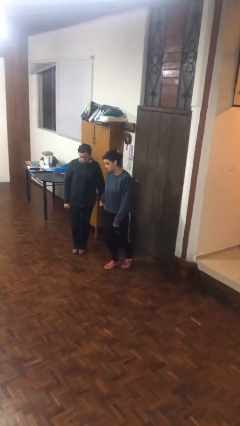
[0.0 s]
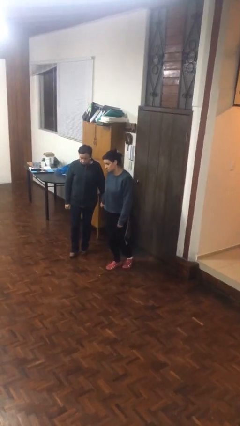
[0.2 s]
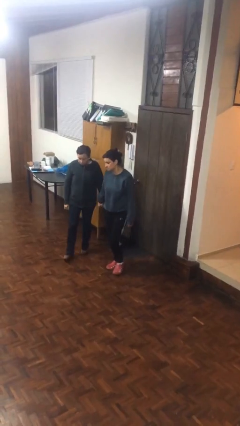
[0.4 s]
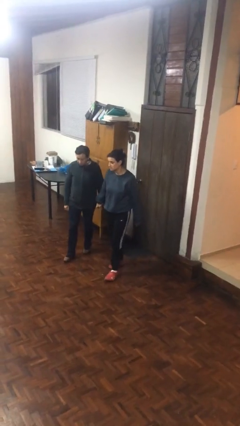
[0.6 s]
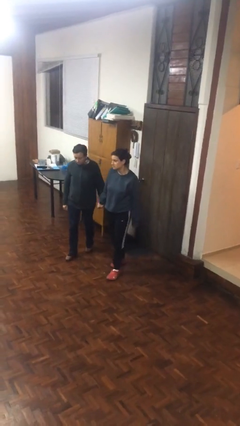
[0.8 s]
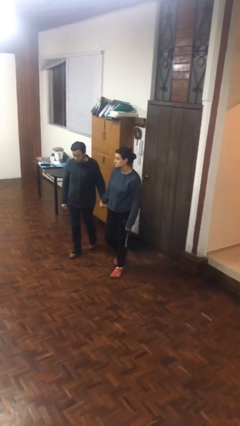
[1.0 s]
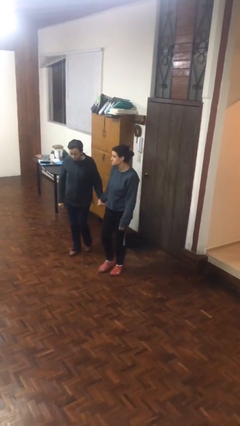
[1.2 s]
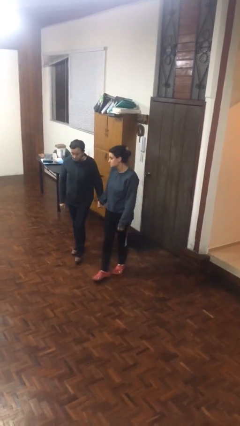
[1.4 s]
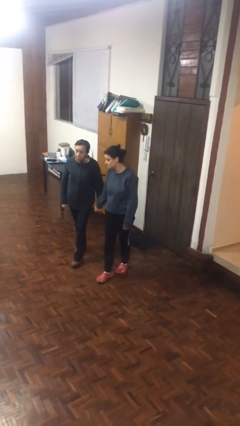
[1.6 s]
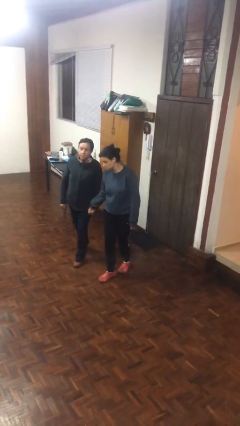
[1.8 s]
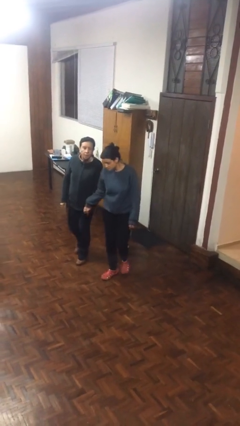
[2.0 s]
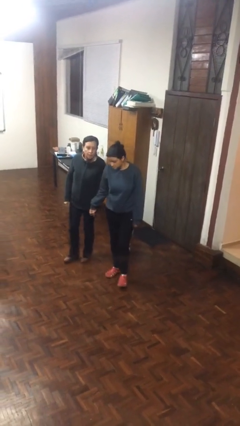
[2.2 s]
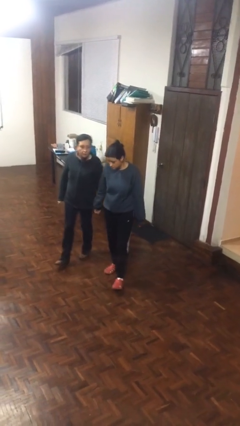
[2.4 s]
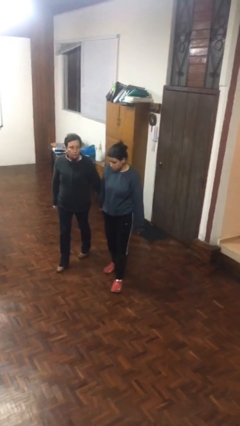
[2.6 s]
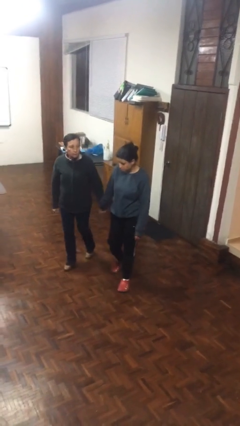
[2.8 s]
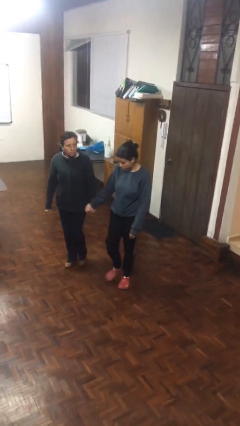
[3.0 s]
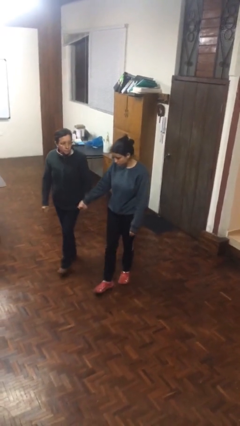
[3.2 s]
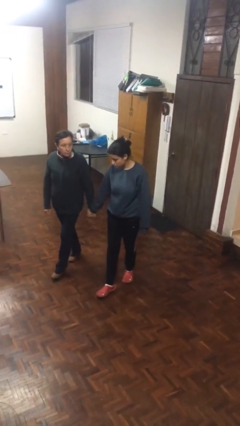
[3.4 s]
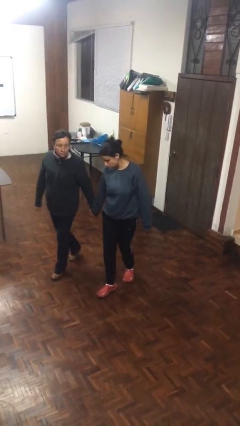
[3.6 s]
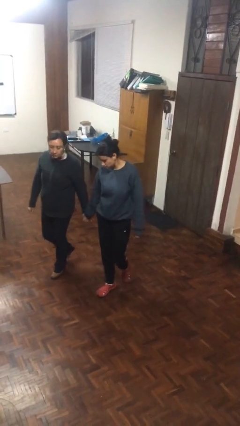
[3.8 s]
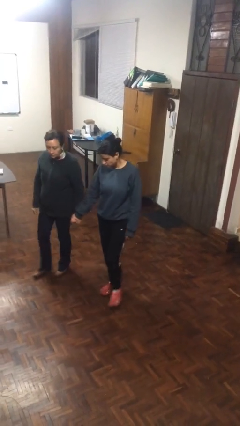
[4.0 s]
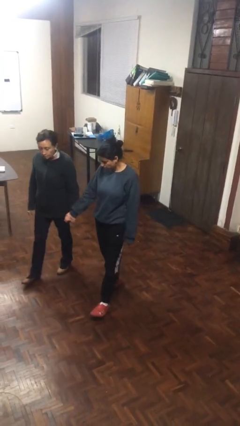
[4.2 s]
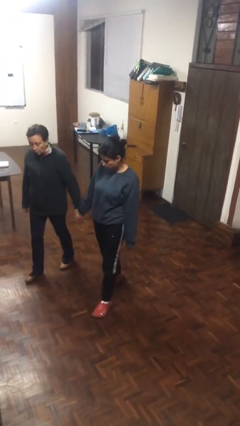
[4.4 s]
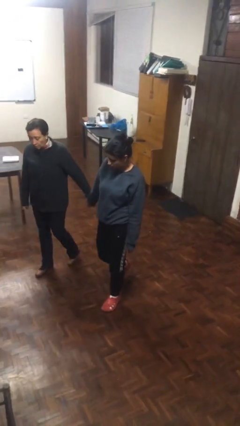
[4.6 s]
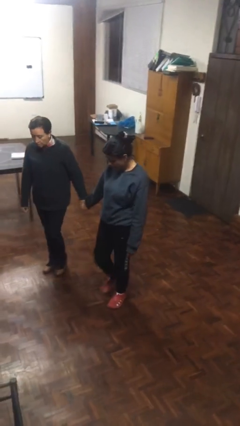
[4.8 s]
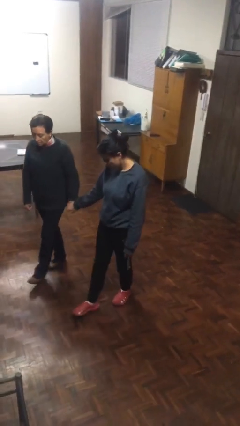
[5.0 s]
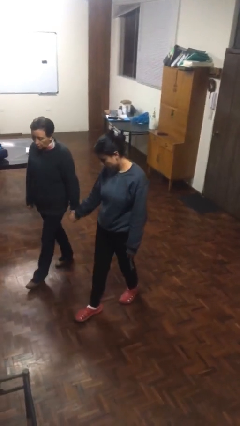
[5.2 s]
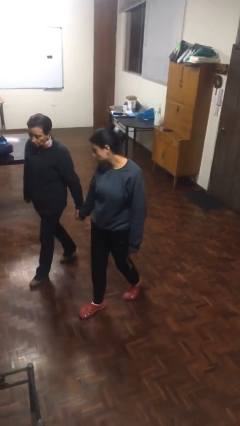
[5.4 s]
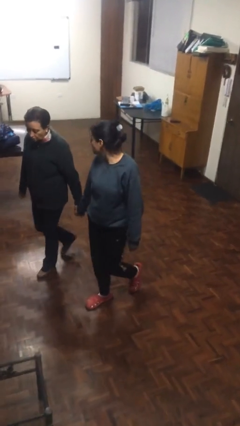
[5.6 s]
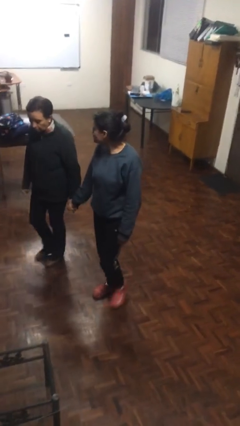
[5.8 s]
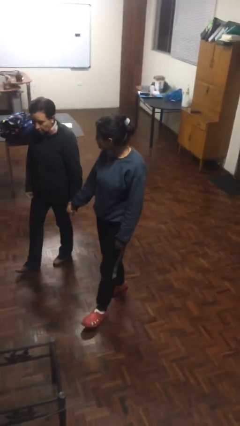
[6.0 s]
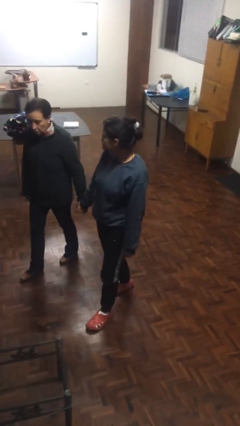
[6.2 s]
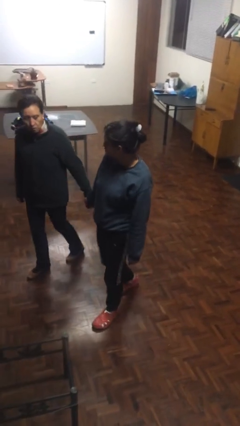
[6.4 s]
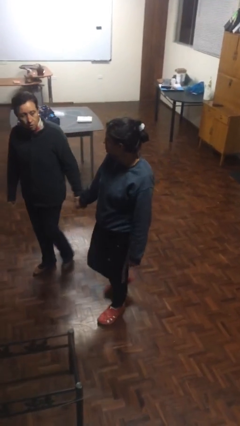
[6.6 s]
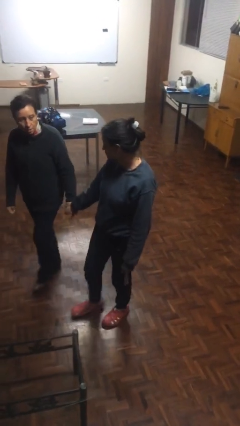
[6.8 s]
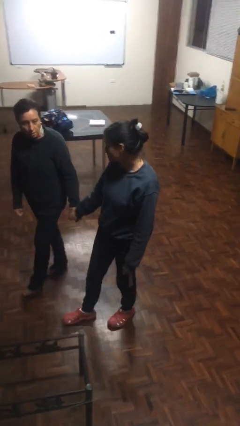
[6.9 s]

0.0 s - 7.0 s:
person holds hand

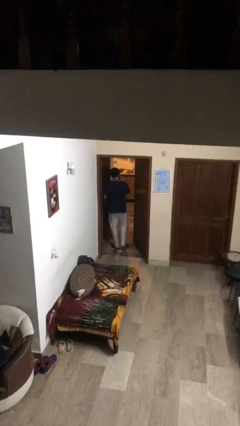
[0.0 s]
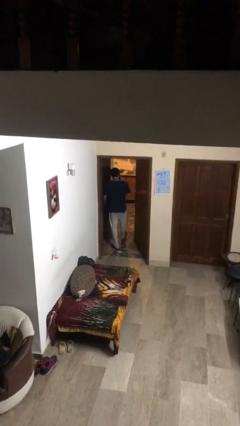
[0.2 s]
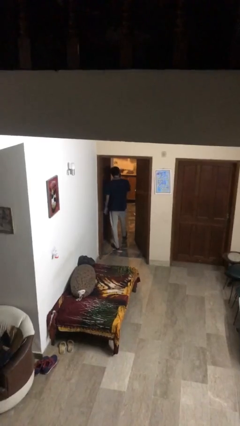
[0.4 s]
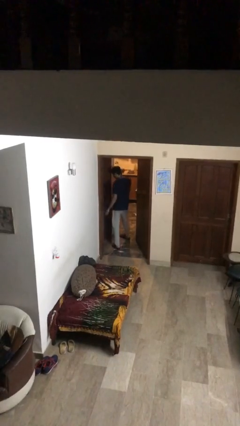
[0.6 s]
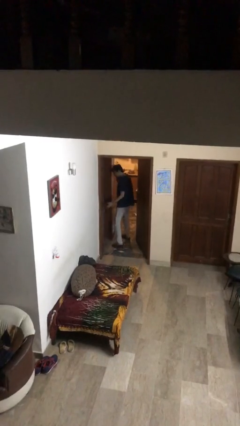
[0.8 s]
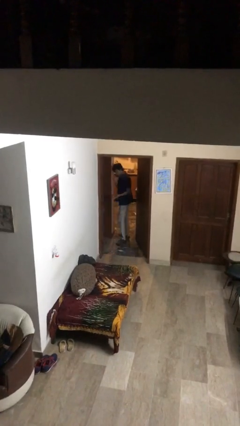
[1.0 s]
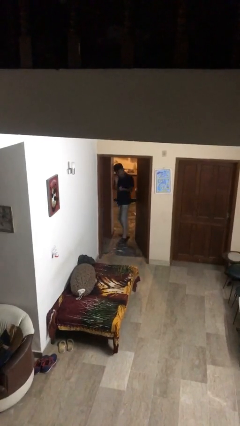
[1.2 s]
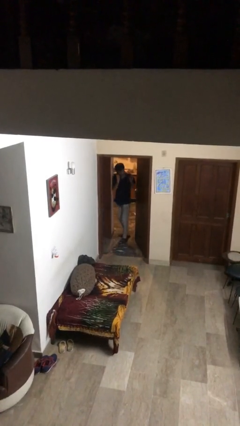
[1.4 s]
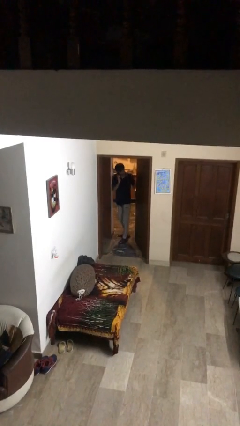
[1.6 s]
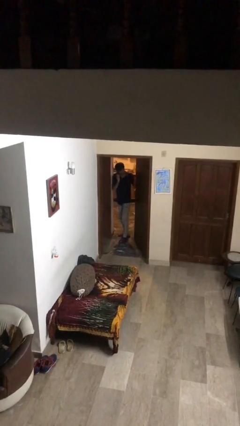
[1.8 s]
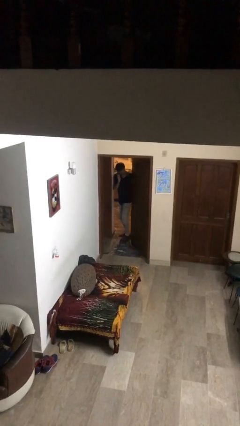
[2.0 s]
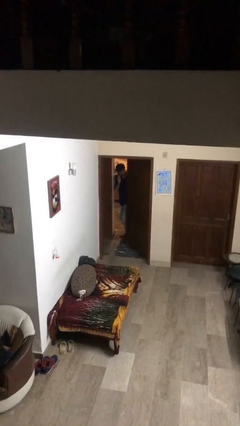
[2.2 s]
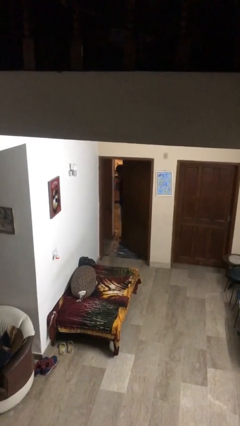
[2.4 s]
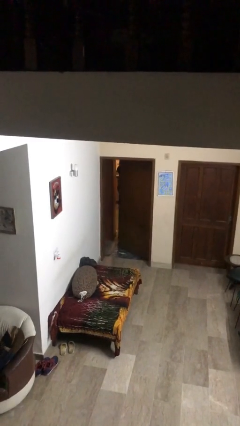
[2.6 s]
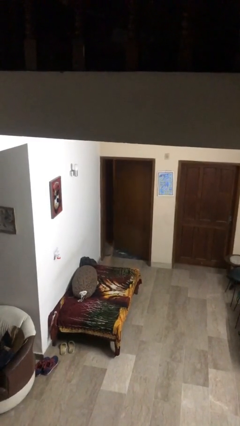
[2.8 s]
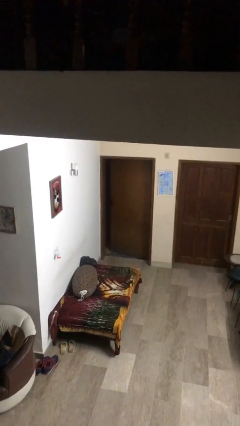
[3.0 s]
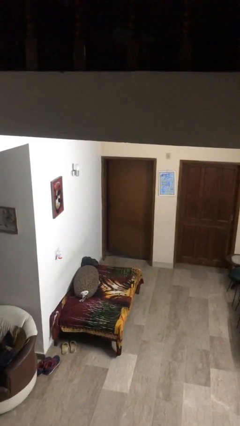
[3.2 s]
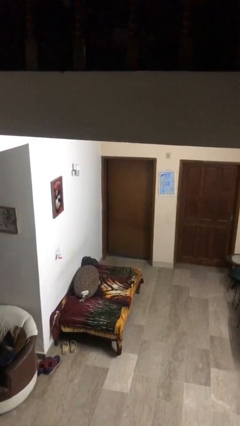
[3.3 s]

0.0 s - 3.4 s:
person closes facility door

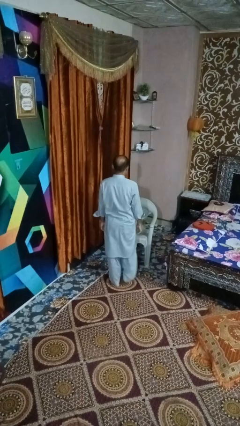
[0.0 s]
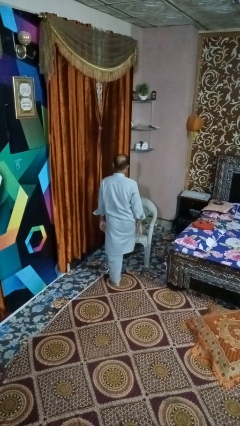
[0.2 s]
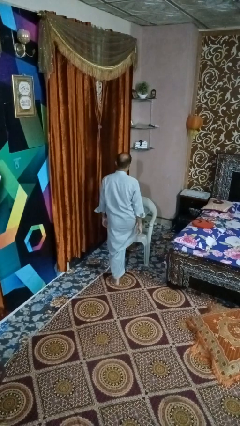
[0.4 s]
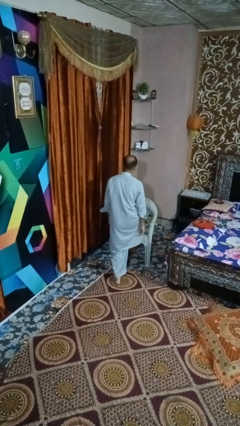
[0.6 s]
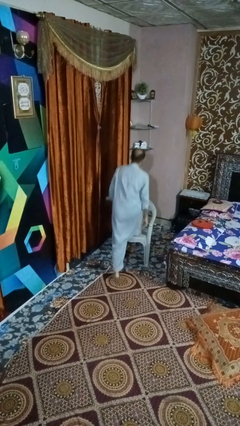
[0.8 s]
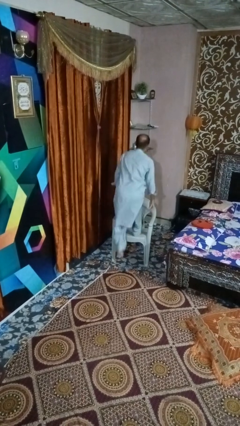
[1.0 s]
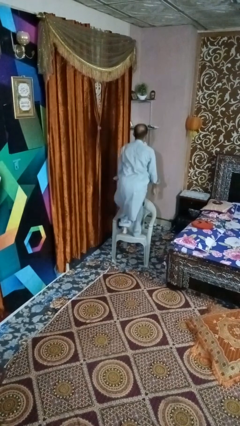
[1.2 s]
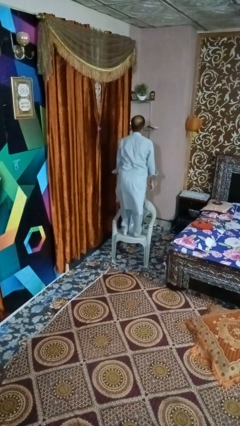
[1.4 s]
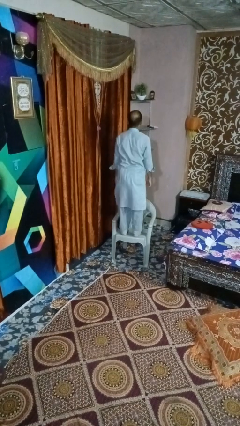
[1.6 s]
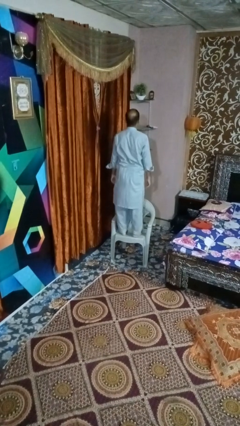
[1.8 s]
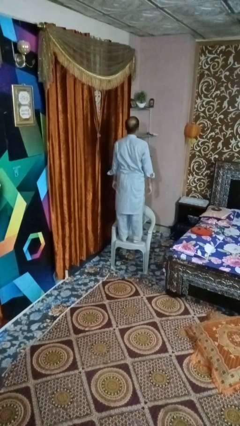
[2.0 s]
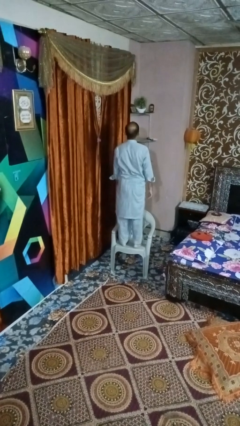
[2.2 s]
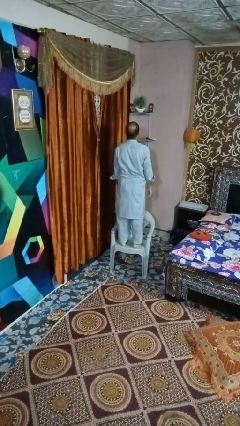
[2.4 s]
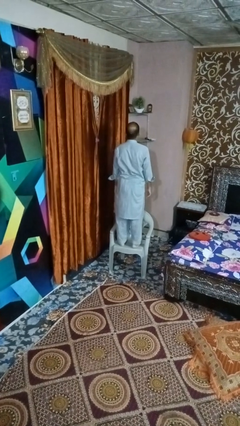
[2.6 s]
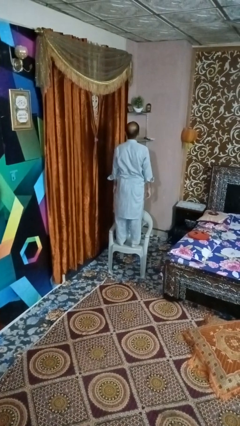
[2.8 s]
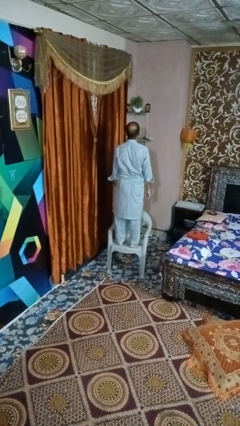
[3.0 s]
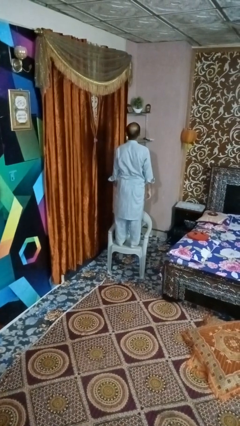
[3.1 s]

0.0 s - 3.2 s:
person climbs on chair

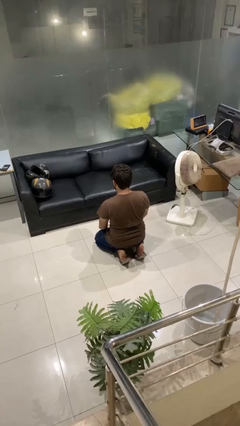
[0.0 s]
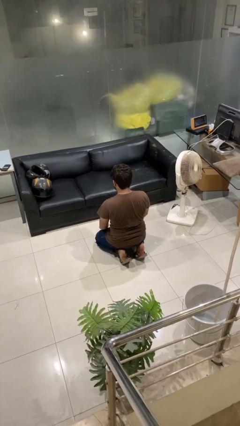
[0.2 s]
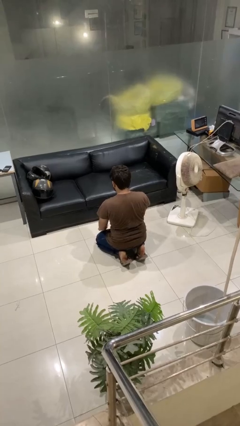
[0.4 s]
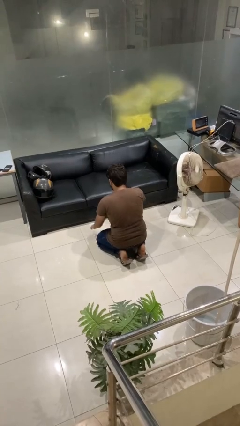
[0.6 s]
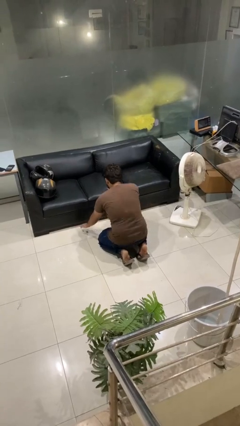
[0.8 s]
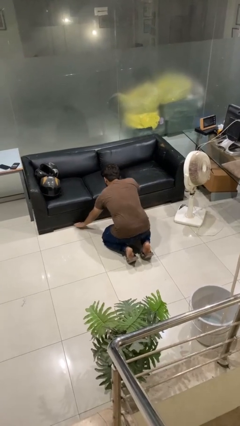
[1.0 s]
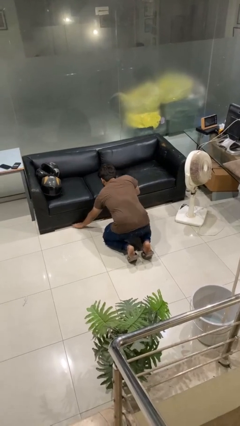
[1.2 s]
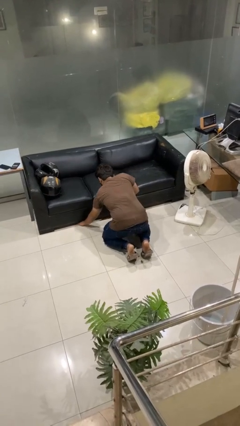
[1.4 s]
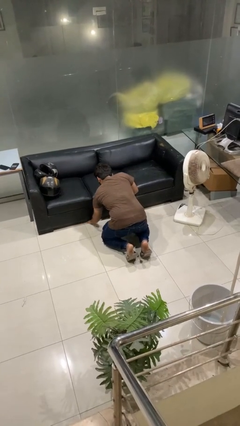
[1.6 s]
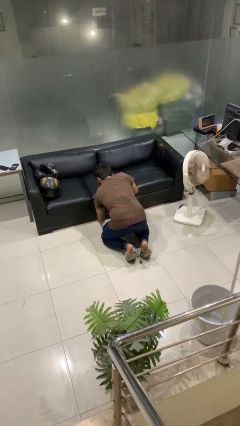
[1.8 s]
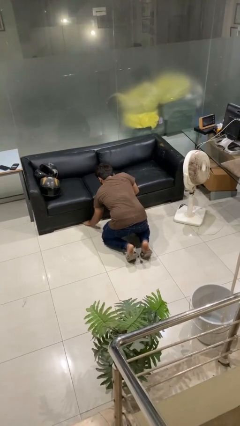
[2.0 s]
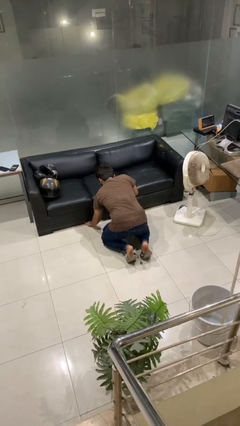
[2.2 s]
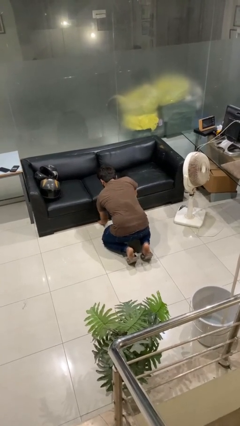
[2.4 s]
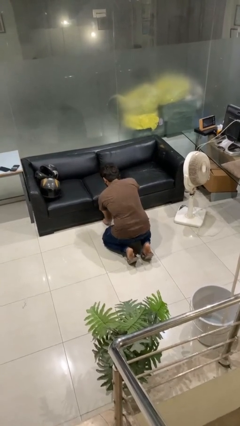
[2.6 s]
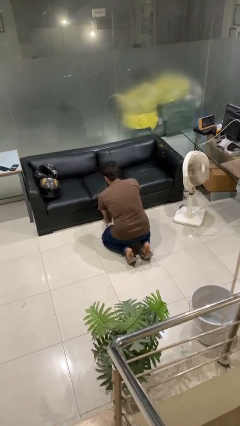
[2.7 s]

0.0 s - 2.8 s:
person searches under couch

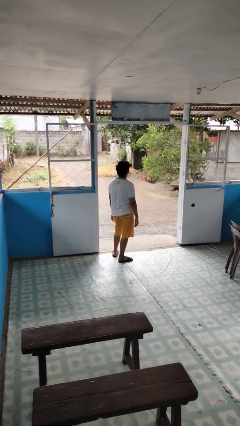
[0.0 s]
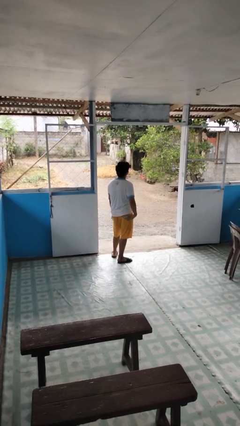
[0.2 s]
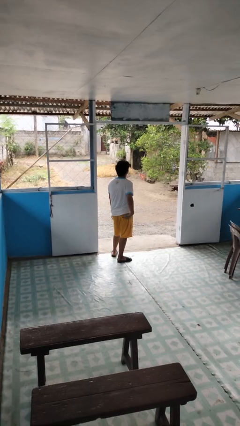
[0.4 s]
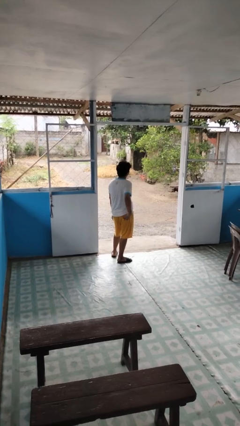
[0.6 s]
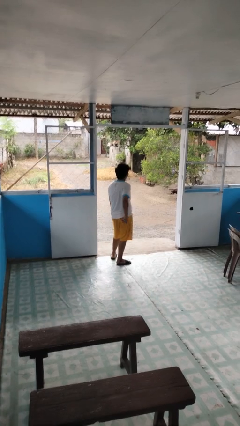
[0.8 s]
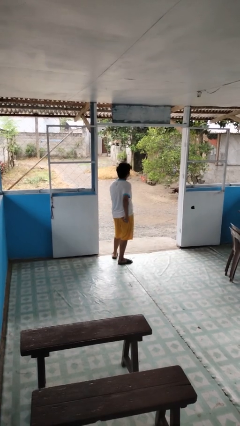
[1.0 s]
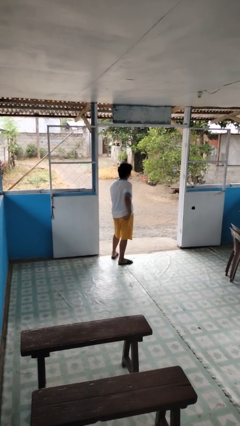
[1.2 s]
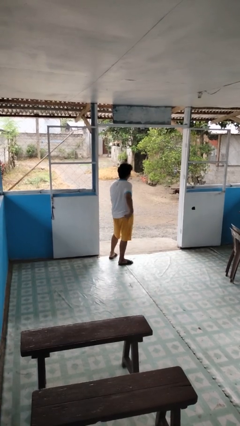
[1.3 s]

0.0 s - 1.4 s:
person takes phone from pocket
